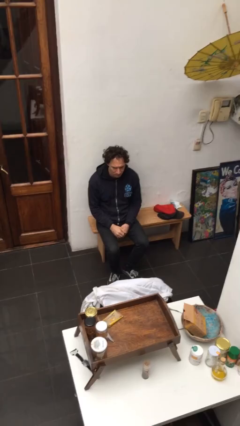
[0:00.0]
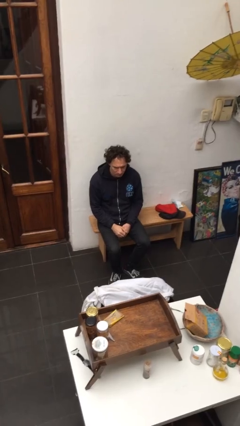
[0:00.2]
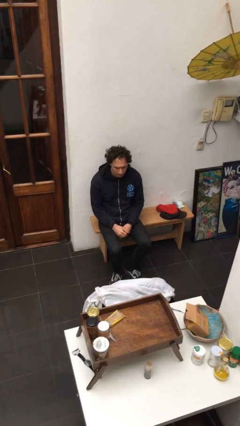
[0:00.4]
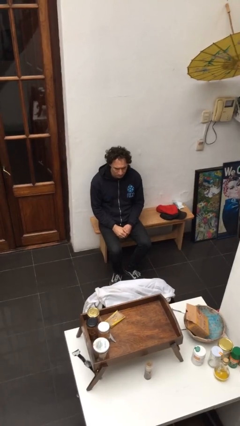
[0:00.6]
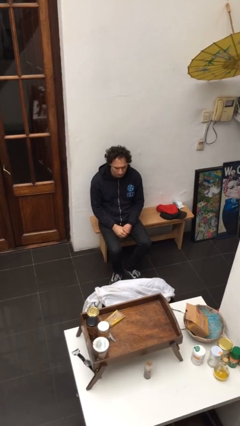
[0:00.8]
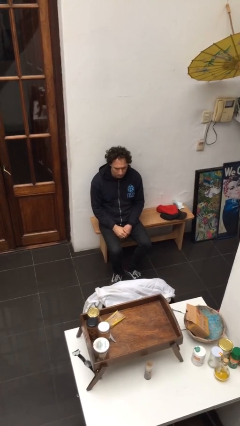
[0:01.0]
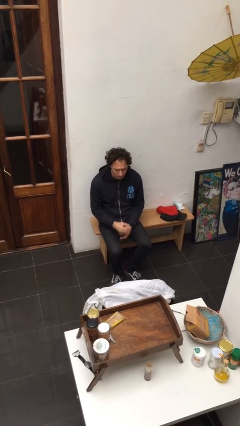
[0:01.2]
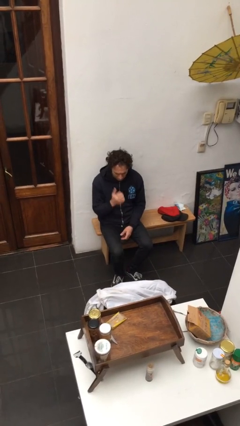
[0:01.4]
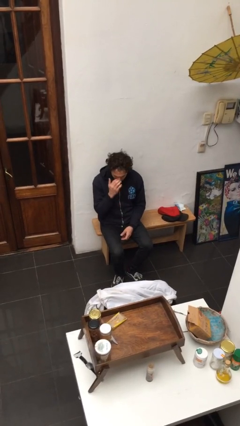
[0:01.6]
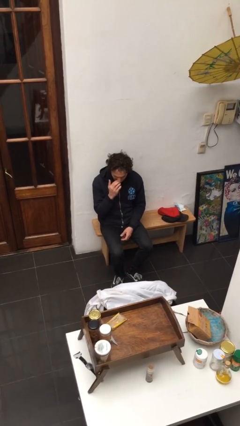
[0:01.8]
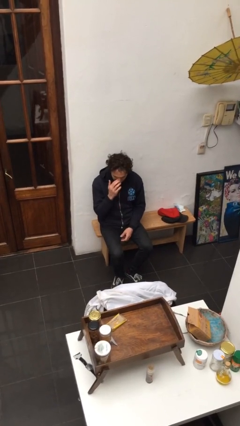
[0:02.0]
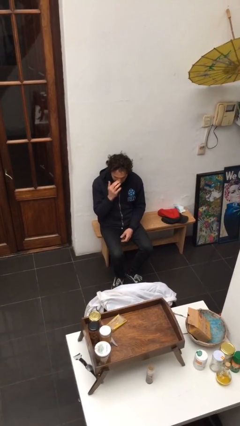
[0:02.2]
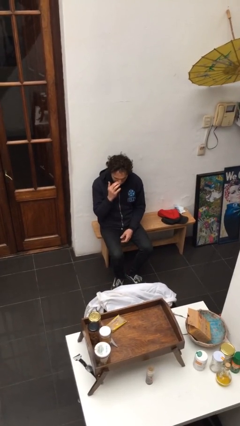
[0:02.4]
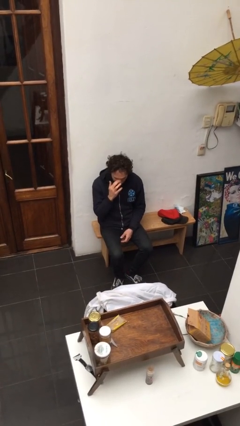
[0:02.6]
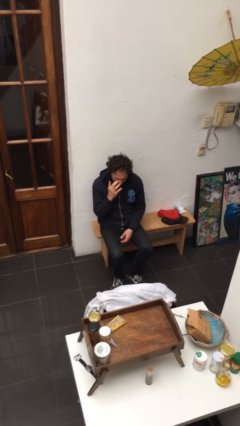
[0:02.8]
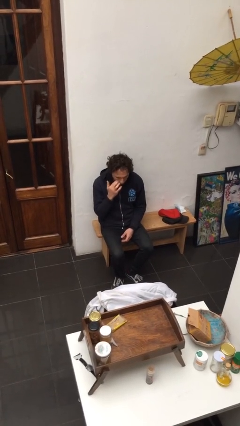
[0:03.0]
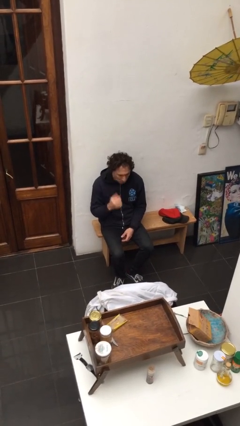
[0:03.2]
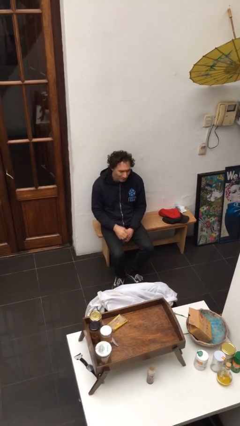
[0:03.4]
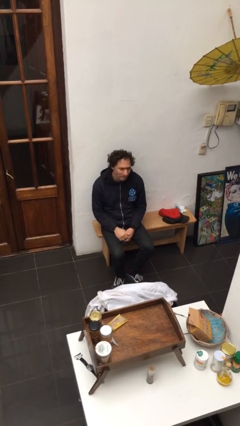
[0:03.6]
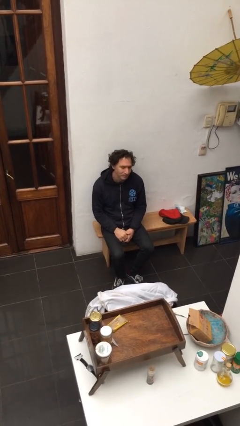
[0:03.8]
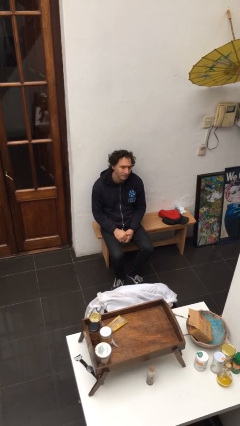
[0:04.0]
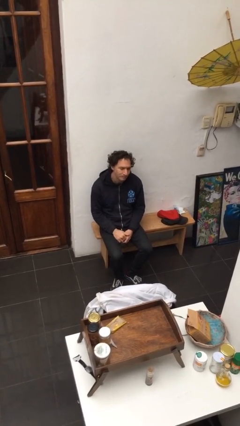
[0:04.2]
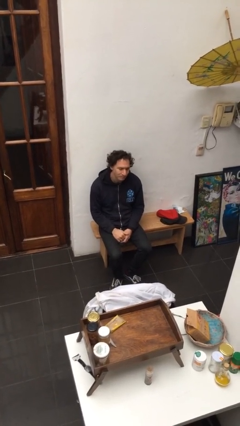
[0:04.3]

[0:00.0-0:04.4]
person scratches face

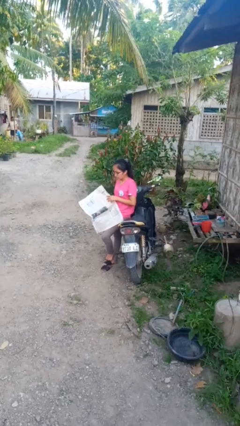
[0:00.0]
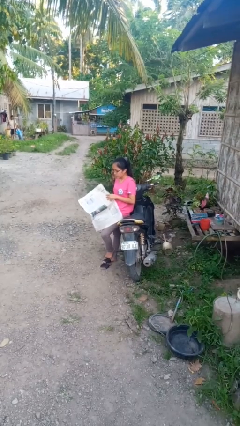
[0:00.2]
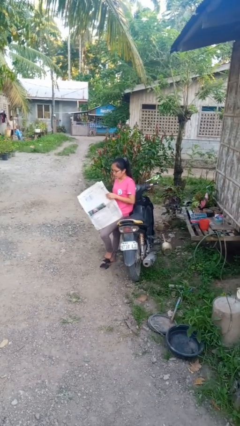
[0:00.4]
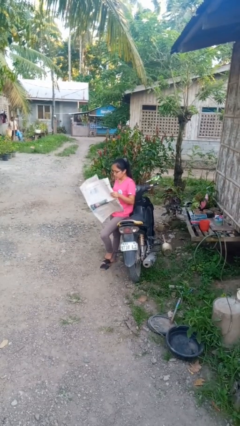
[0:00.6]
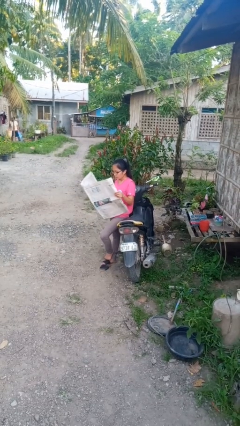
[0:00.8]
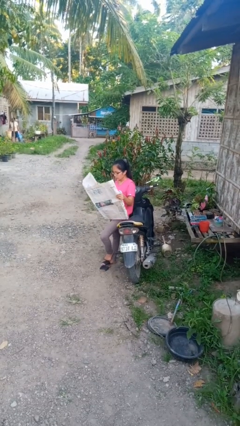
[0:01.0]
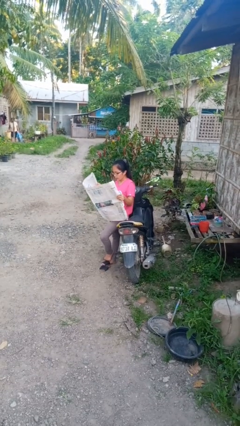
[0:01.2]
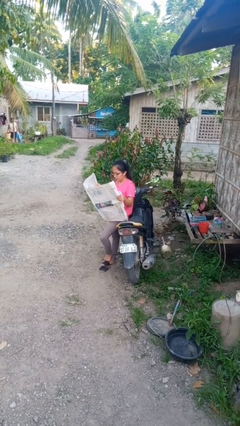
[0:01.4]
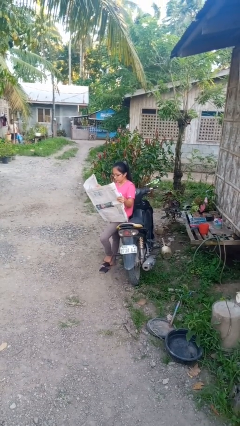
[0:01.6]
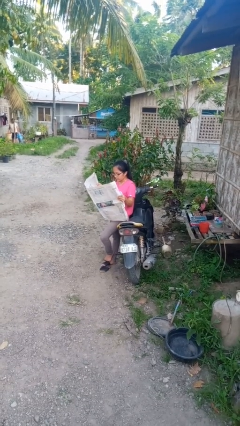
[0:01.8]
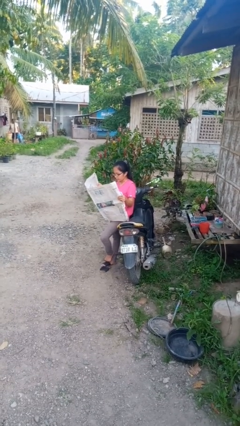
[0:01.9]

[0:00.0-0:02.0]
person reads newspaper

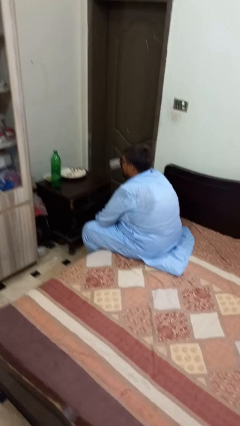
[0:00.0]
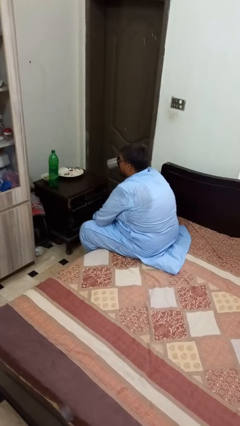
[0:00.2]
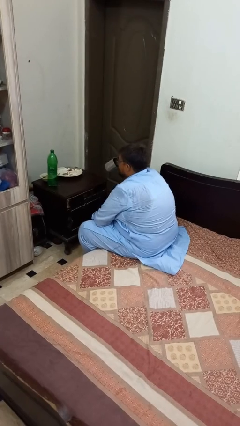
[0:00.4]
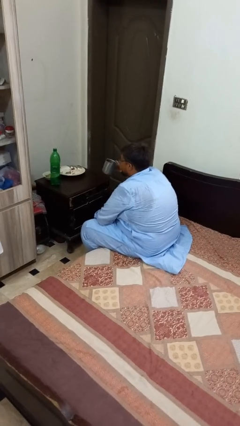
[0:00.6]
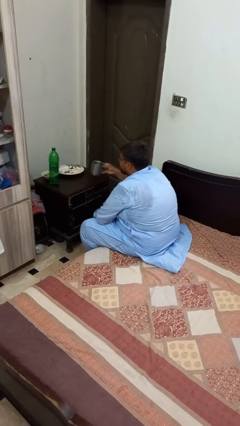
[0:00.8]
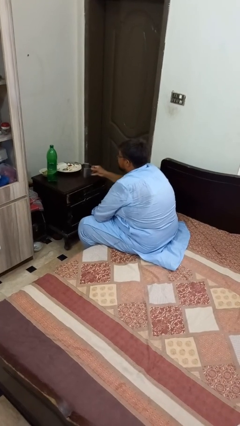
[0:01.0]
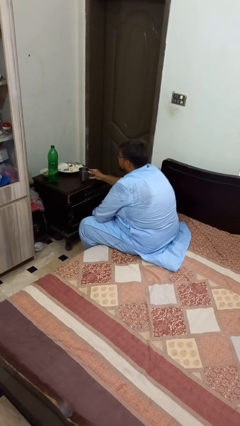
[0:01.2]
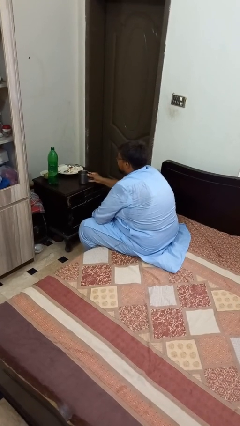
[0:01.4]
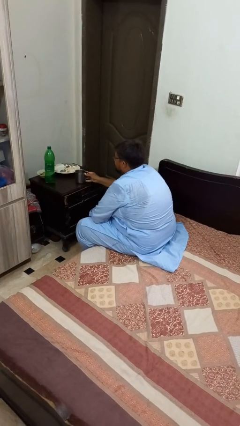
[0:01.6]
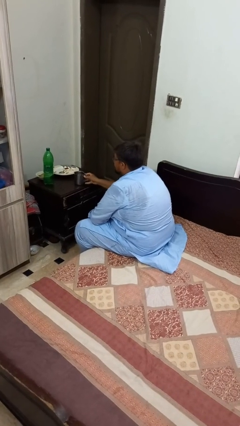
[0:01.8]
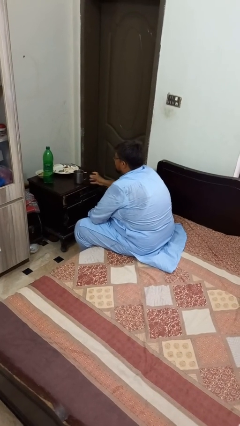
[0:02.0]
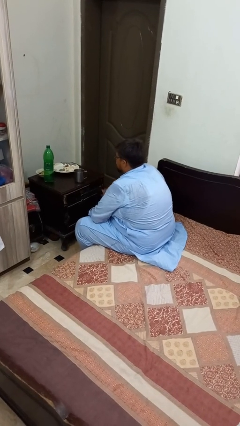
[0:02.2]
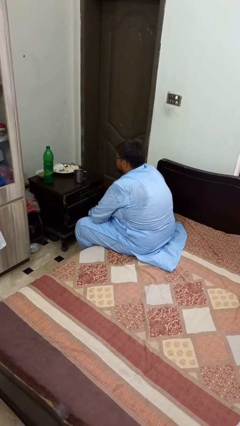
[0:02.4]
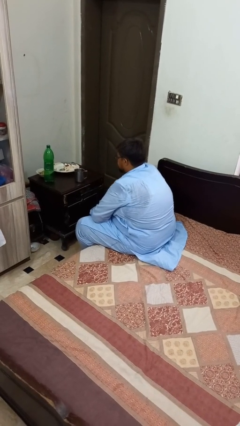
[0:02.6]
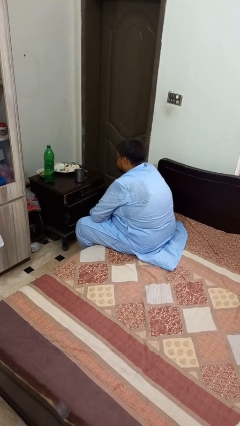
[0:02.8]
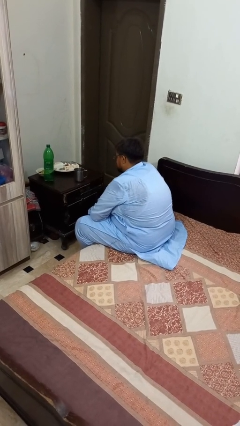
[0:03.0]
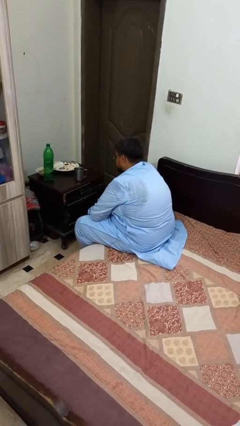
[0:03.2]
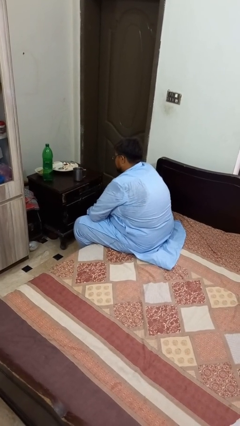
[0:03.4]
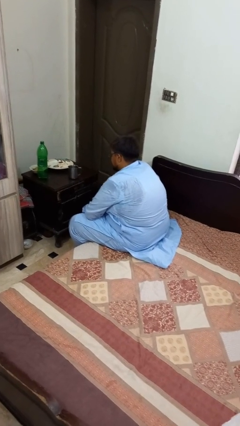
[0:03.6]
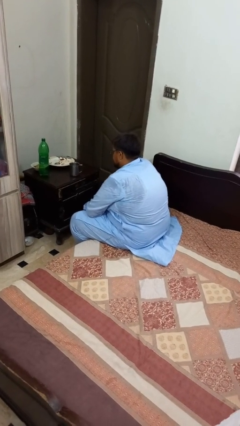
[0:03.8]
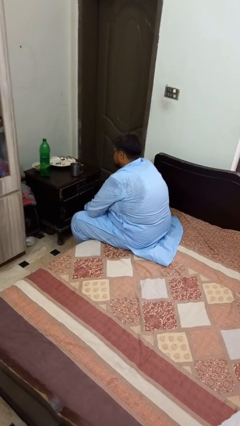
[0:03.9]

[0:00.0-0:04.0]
person puts down object on table

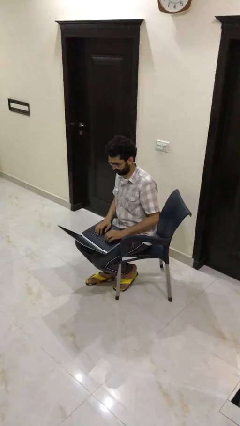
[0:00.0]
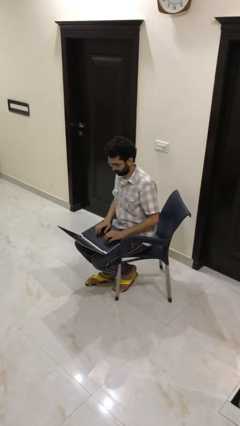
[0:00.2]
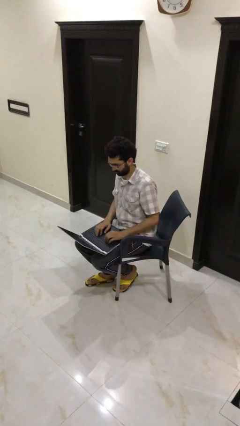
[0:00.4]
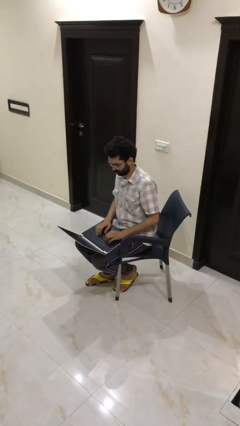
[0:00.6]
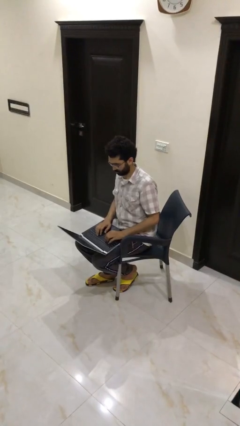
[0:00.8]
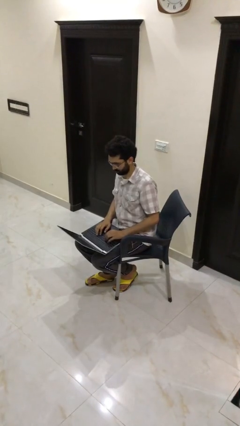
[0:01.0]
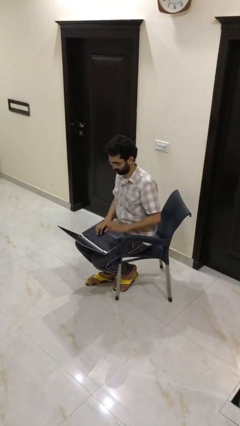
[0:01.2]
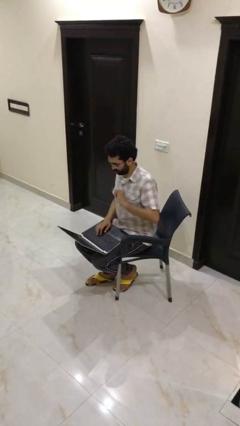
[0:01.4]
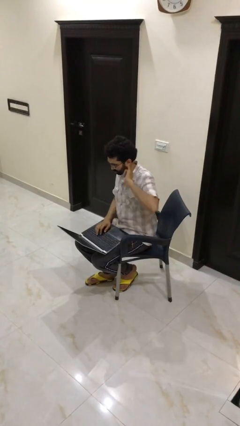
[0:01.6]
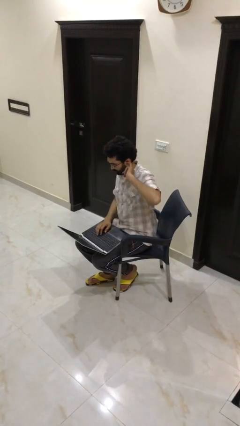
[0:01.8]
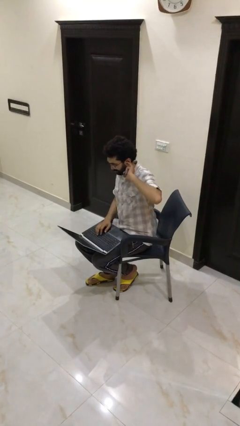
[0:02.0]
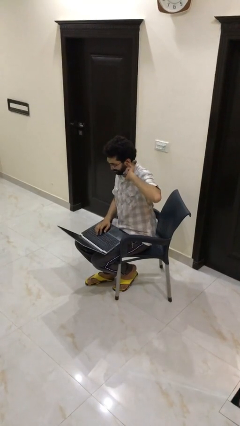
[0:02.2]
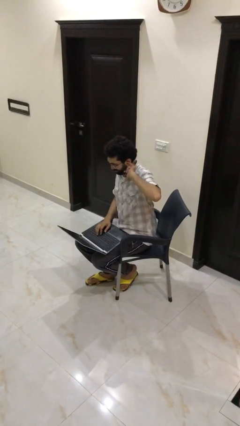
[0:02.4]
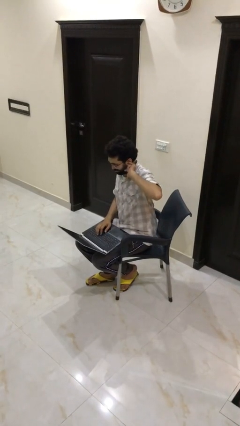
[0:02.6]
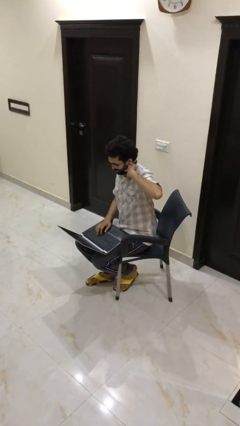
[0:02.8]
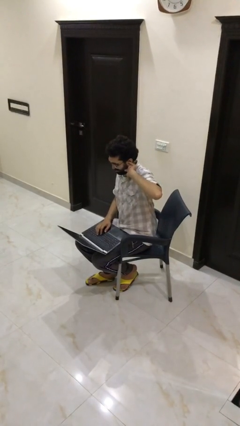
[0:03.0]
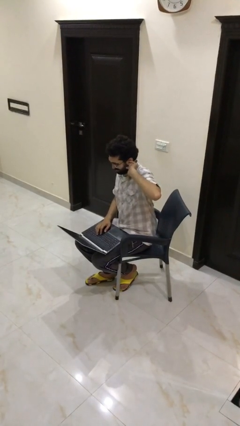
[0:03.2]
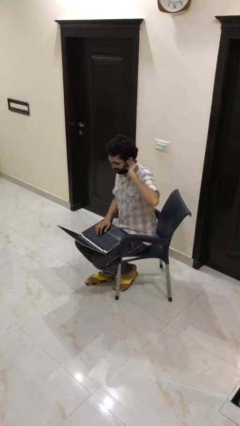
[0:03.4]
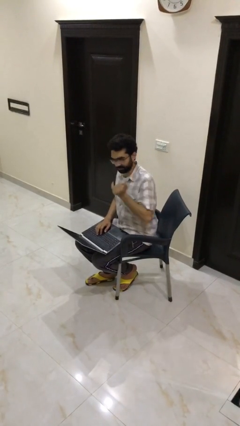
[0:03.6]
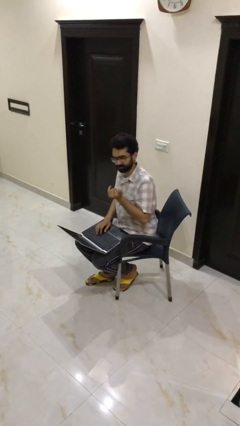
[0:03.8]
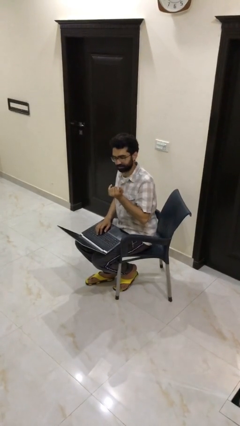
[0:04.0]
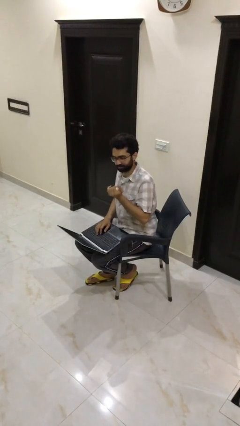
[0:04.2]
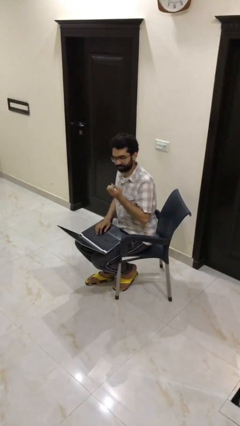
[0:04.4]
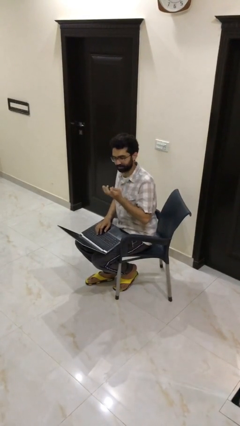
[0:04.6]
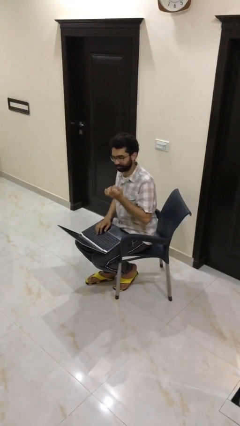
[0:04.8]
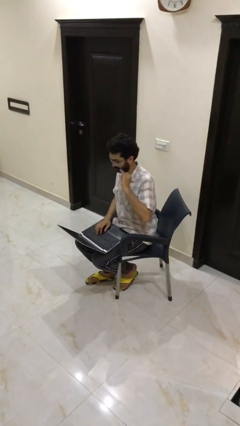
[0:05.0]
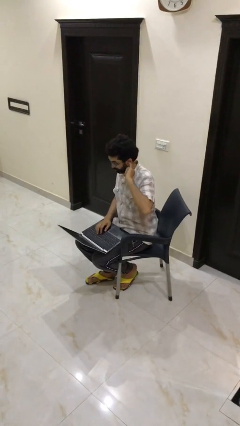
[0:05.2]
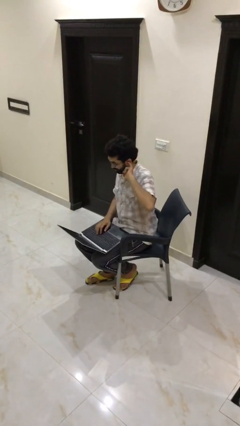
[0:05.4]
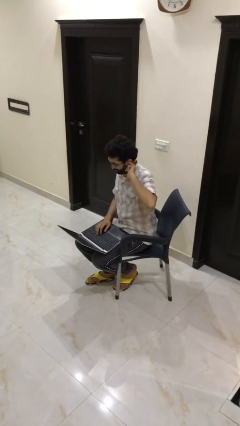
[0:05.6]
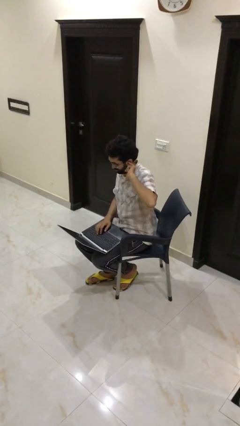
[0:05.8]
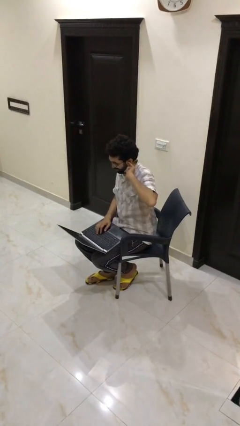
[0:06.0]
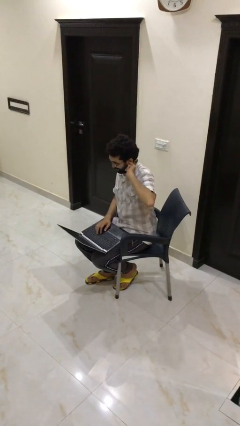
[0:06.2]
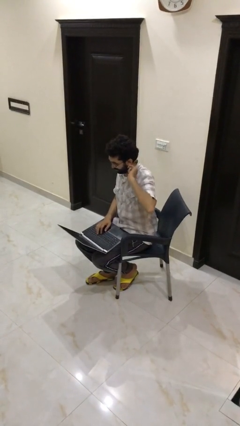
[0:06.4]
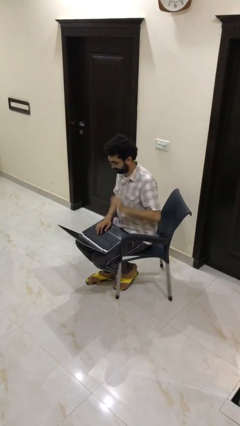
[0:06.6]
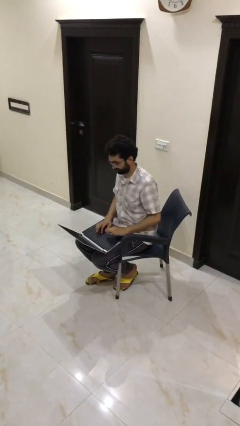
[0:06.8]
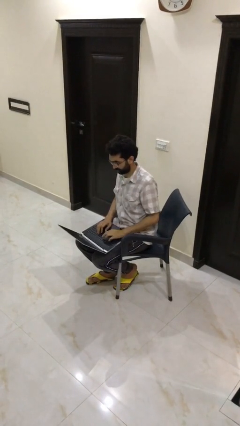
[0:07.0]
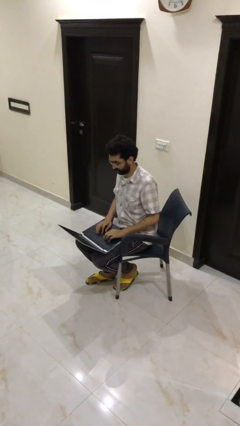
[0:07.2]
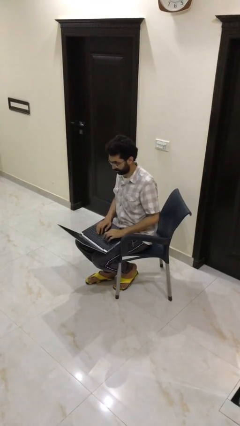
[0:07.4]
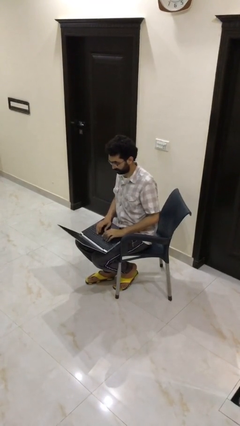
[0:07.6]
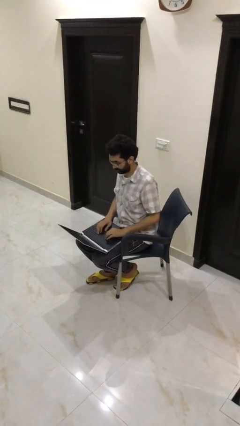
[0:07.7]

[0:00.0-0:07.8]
person interacts with laptop
